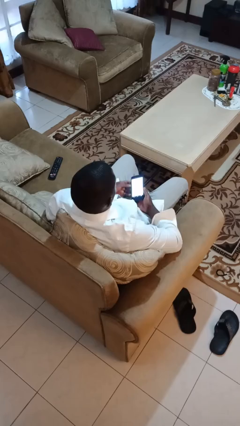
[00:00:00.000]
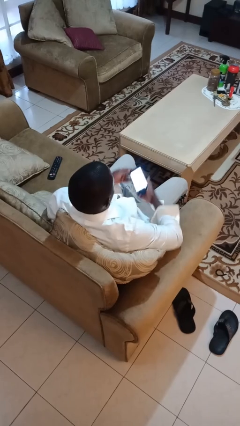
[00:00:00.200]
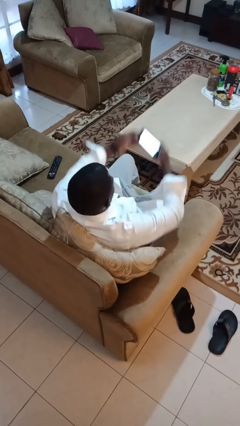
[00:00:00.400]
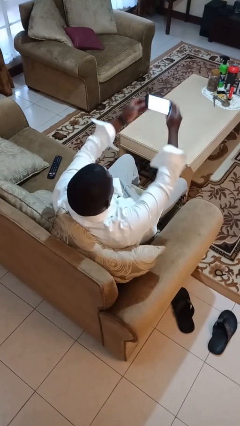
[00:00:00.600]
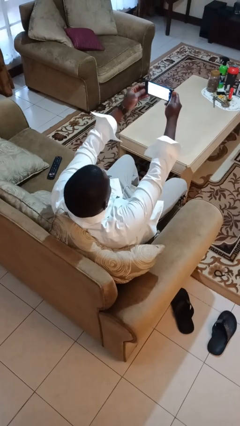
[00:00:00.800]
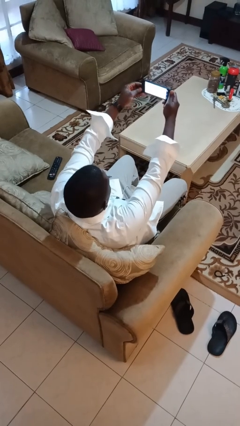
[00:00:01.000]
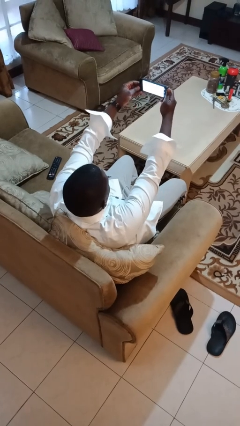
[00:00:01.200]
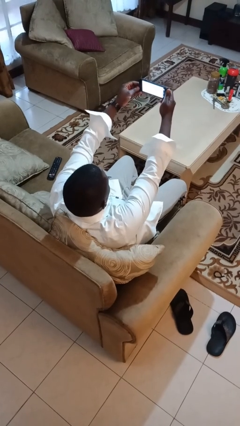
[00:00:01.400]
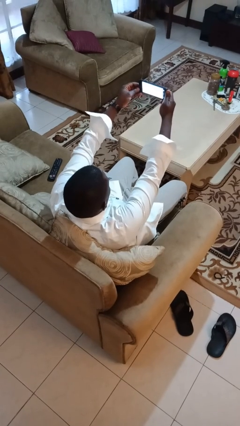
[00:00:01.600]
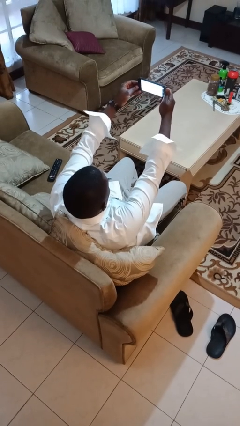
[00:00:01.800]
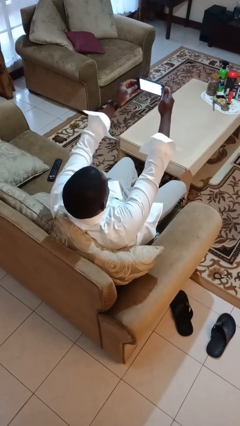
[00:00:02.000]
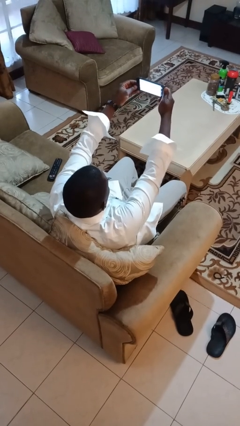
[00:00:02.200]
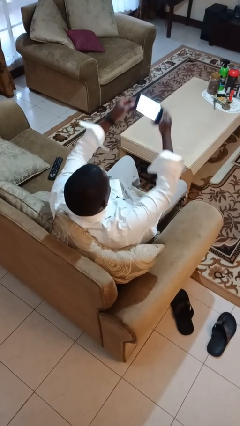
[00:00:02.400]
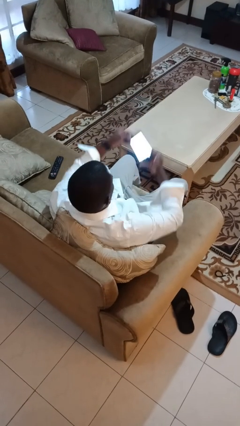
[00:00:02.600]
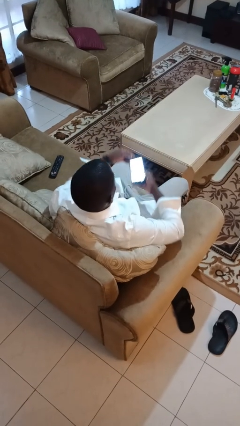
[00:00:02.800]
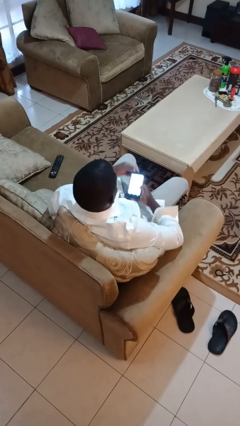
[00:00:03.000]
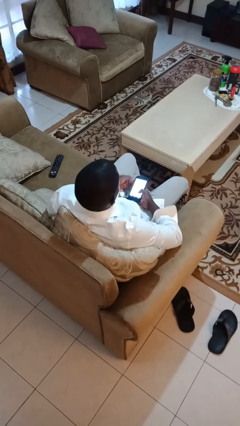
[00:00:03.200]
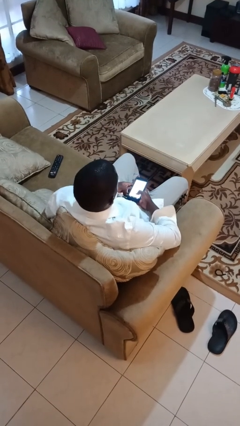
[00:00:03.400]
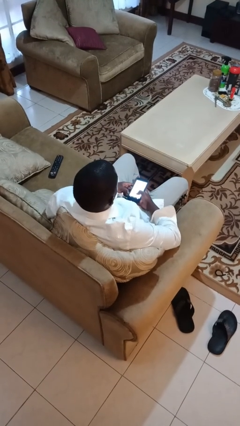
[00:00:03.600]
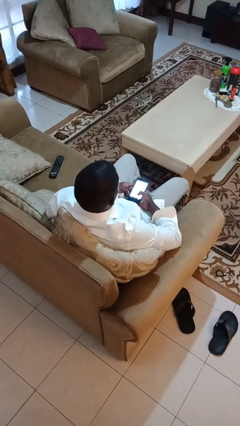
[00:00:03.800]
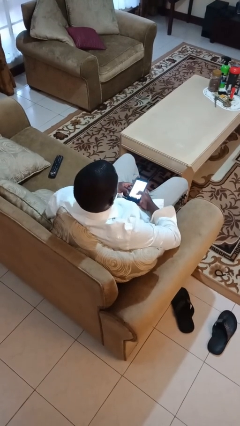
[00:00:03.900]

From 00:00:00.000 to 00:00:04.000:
person takes selfie

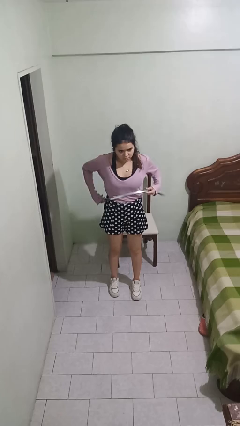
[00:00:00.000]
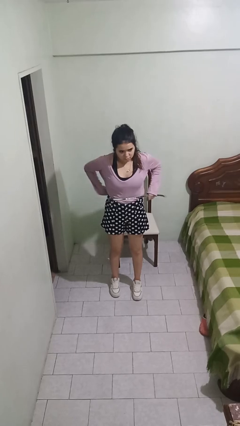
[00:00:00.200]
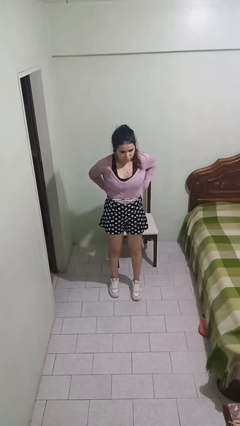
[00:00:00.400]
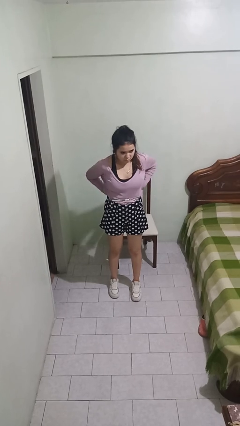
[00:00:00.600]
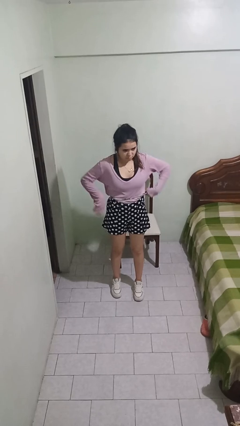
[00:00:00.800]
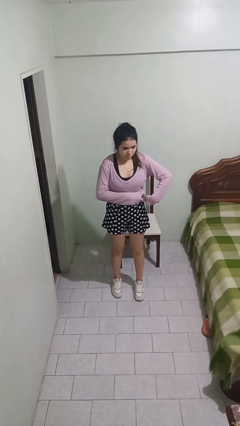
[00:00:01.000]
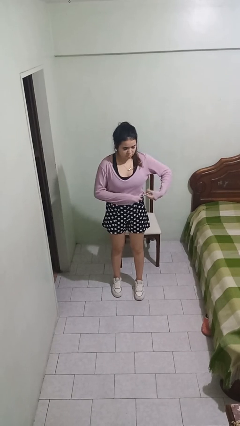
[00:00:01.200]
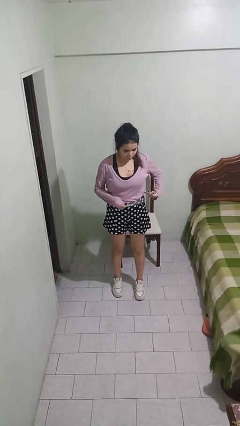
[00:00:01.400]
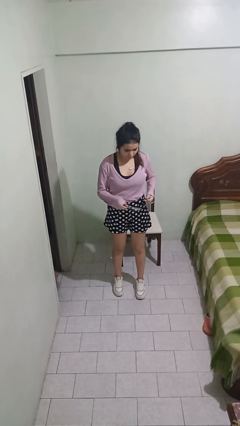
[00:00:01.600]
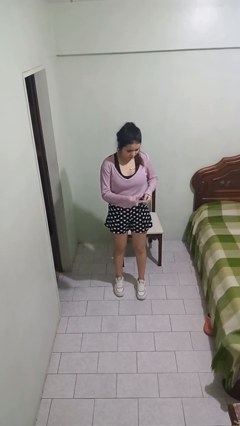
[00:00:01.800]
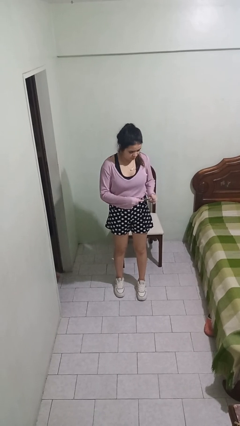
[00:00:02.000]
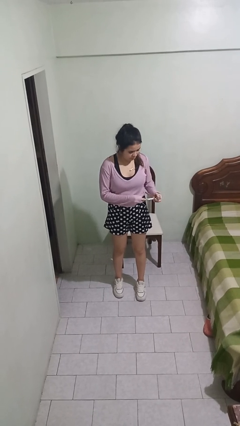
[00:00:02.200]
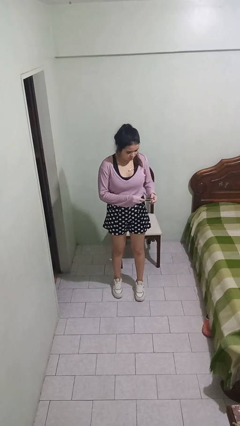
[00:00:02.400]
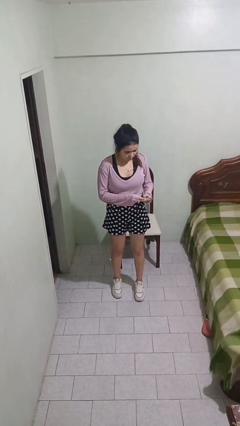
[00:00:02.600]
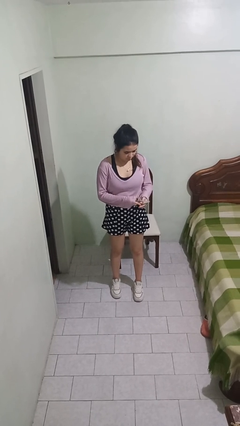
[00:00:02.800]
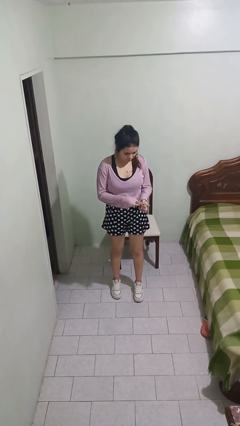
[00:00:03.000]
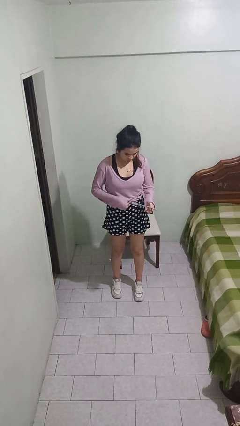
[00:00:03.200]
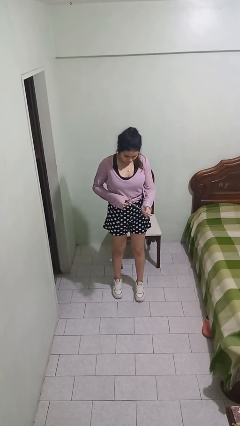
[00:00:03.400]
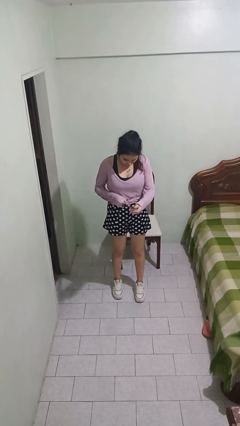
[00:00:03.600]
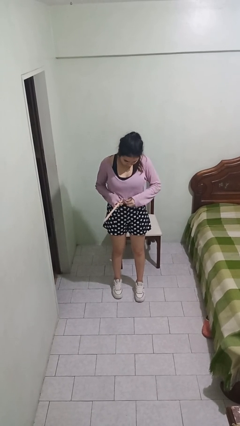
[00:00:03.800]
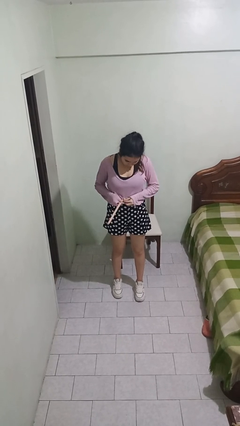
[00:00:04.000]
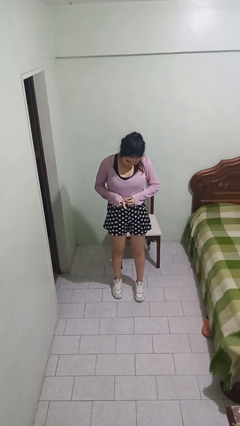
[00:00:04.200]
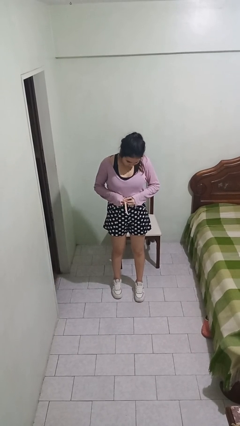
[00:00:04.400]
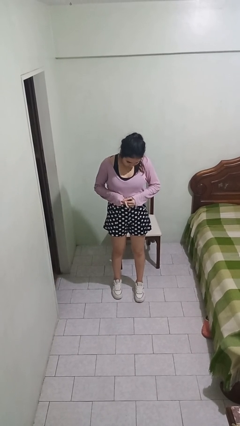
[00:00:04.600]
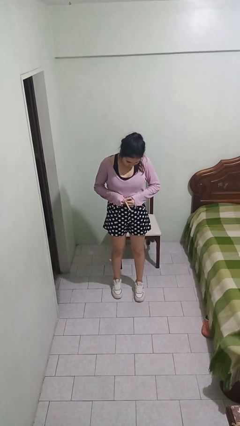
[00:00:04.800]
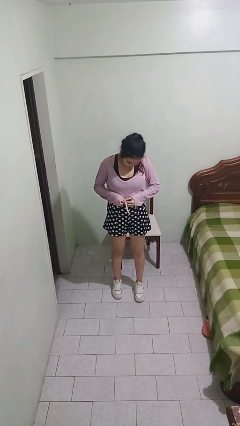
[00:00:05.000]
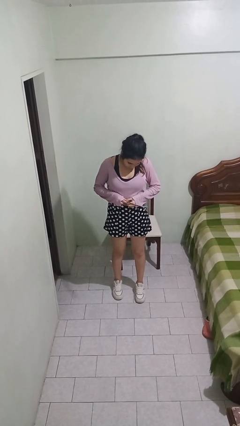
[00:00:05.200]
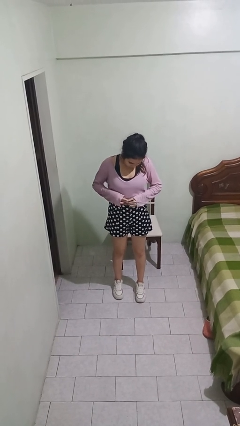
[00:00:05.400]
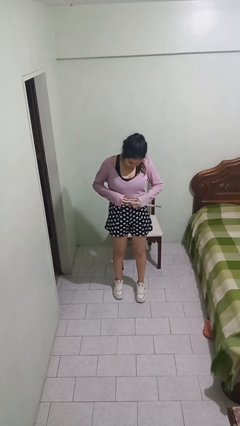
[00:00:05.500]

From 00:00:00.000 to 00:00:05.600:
person puts on belt

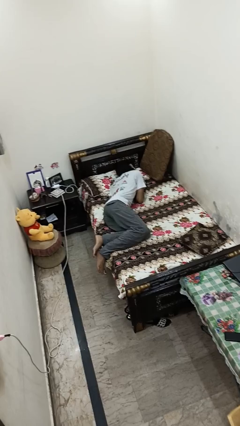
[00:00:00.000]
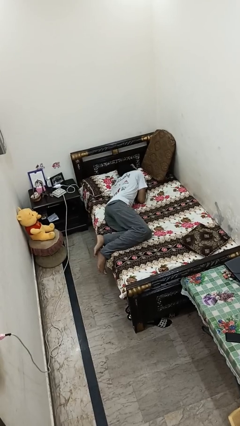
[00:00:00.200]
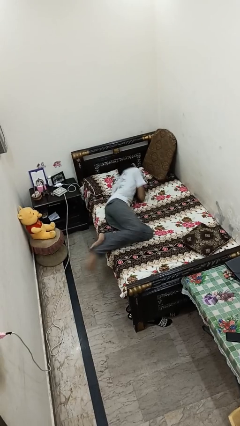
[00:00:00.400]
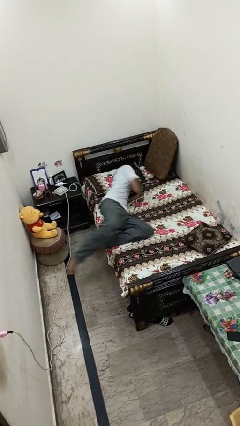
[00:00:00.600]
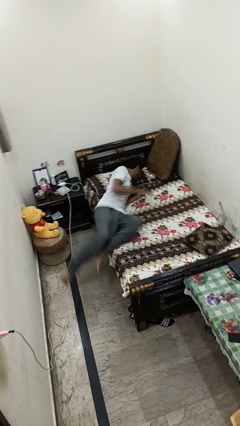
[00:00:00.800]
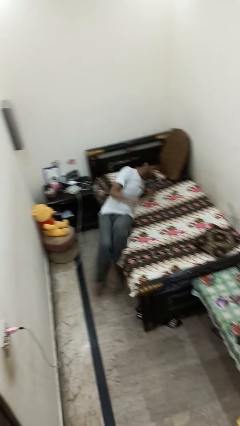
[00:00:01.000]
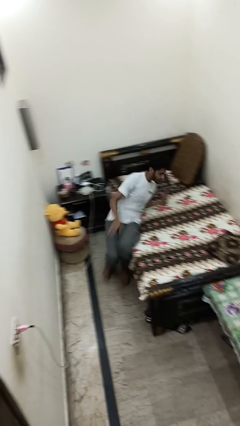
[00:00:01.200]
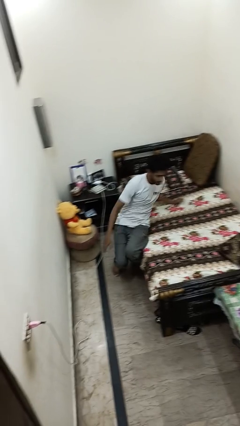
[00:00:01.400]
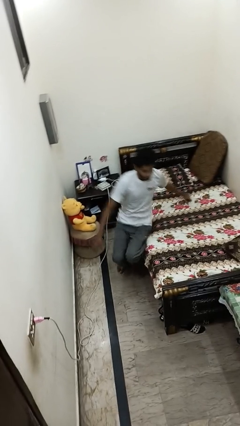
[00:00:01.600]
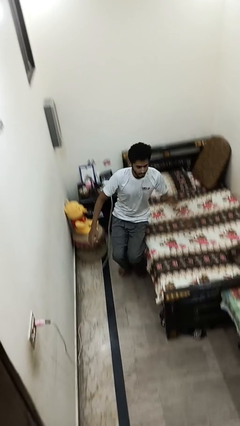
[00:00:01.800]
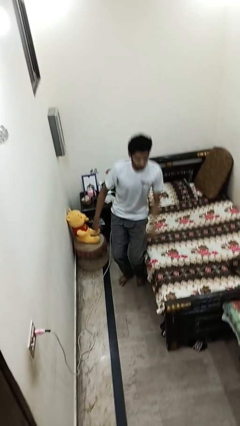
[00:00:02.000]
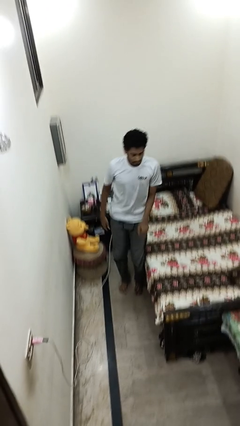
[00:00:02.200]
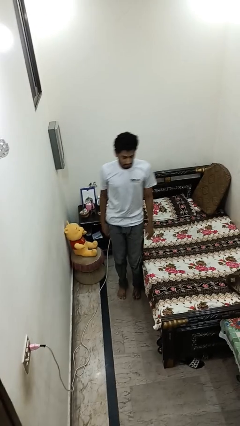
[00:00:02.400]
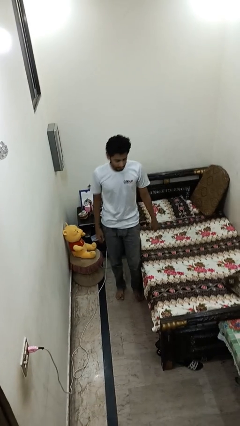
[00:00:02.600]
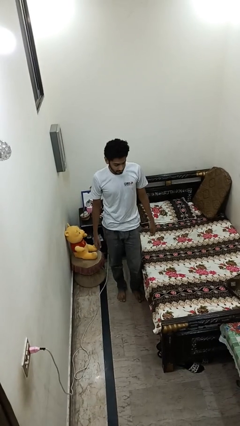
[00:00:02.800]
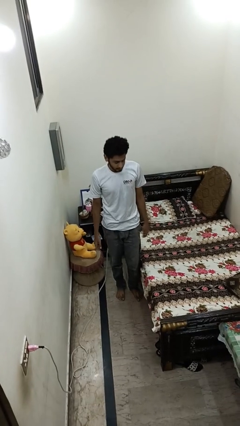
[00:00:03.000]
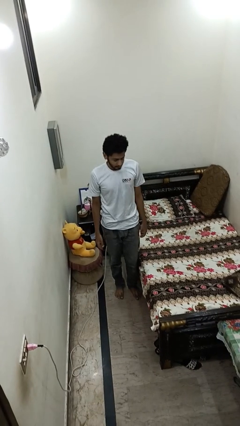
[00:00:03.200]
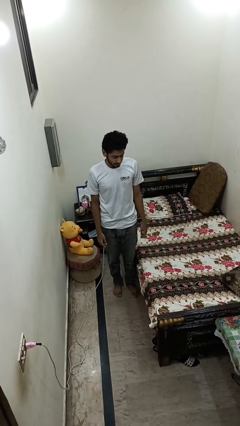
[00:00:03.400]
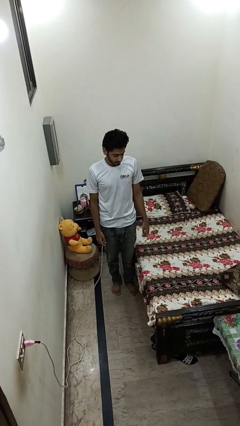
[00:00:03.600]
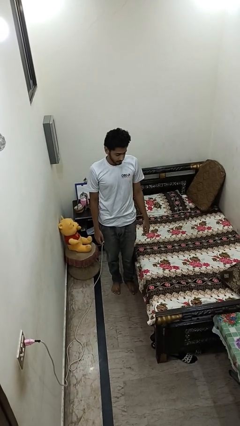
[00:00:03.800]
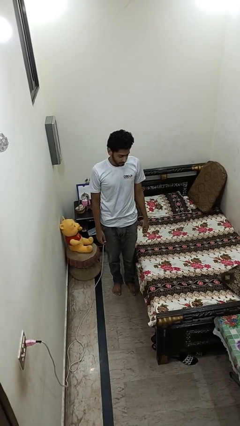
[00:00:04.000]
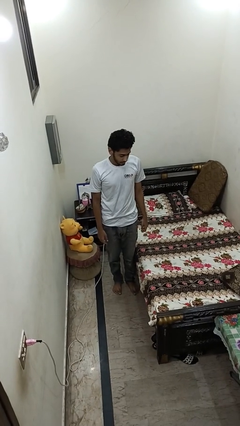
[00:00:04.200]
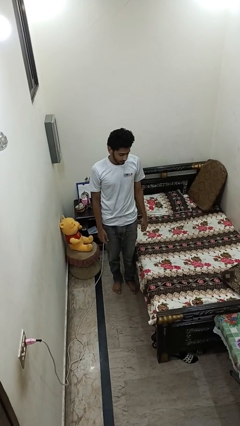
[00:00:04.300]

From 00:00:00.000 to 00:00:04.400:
person stands up

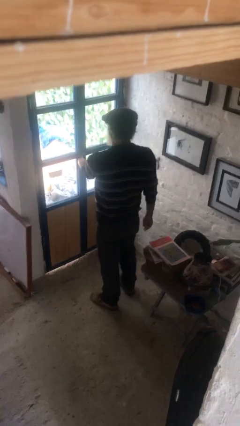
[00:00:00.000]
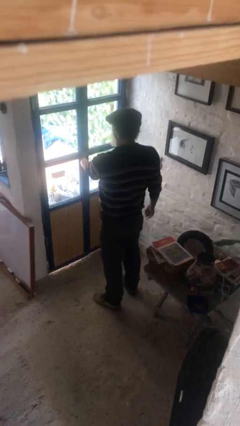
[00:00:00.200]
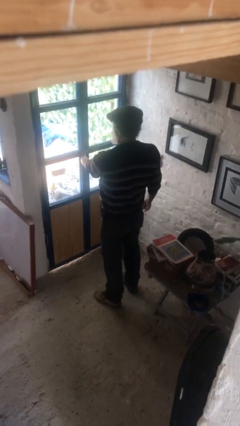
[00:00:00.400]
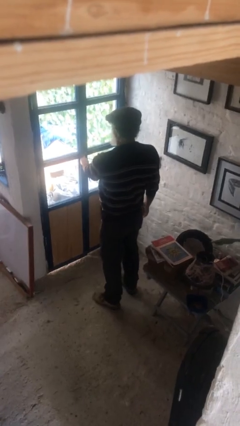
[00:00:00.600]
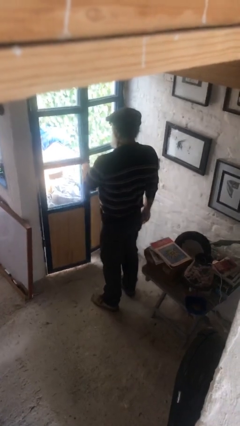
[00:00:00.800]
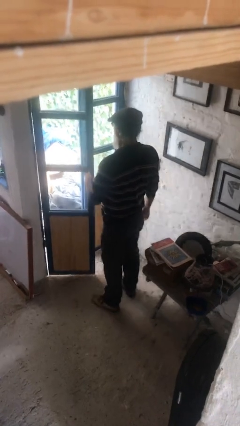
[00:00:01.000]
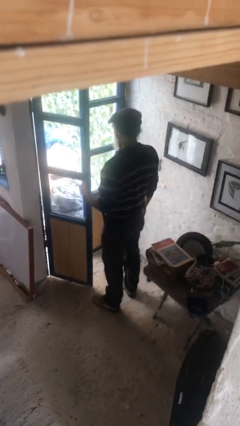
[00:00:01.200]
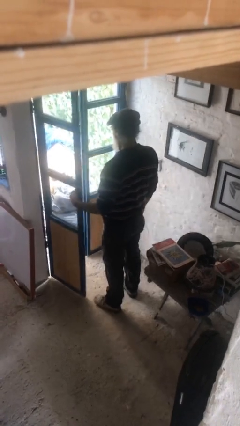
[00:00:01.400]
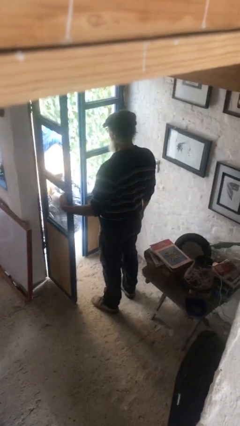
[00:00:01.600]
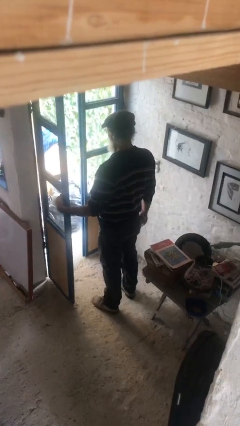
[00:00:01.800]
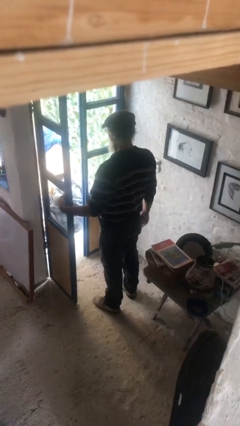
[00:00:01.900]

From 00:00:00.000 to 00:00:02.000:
person opens facility door

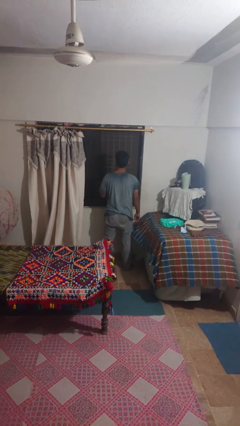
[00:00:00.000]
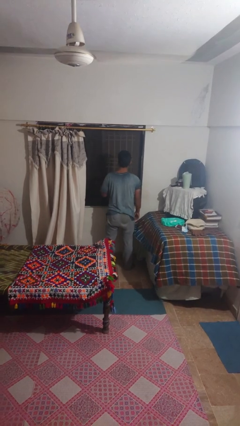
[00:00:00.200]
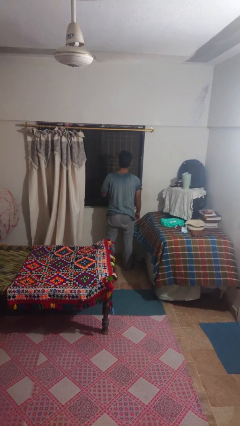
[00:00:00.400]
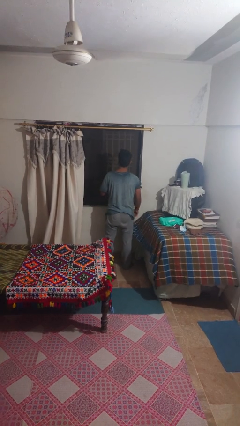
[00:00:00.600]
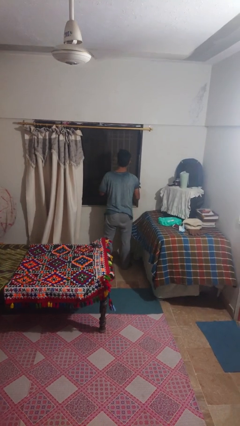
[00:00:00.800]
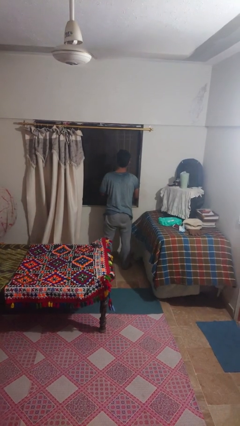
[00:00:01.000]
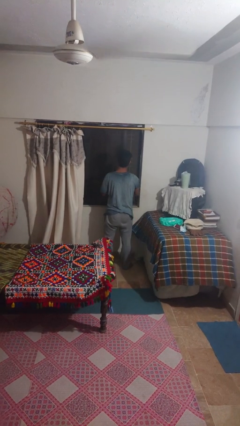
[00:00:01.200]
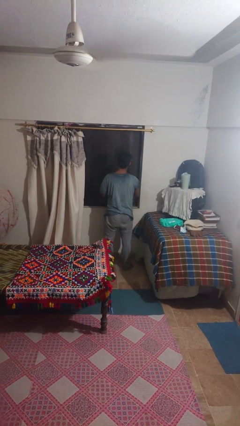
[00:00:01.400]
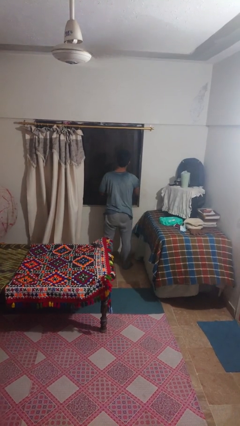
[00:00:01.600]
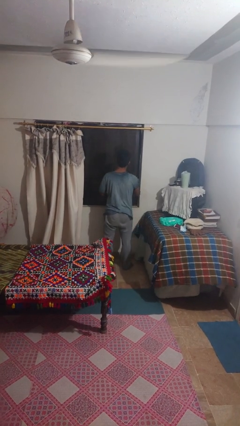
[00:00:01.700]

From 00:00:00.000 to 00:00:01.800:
person closes sliding door
